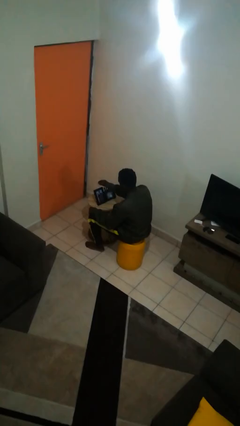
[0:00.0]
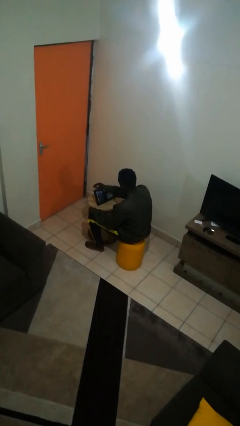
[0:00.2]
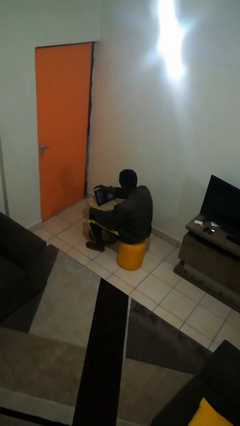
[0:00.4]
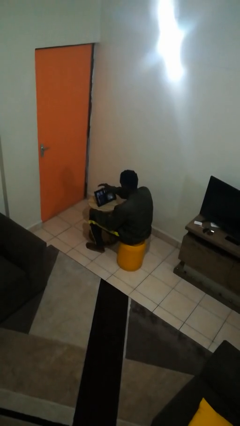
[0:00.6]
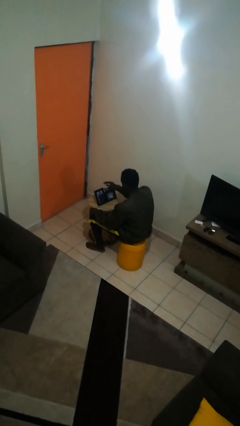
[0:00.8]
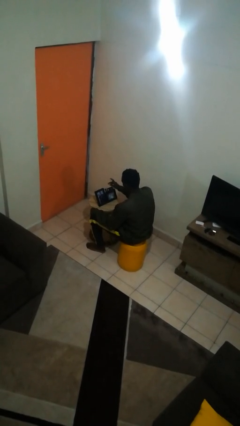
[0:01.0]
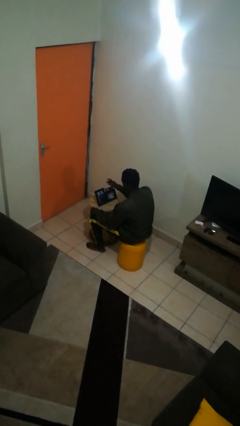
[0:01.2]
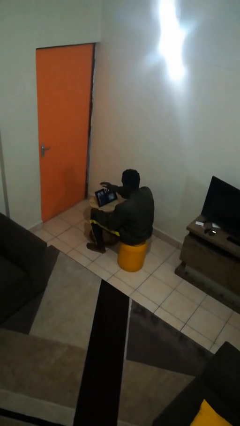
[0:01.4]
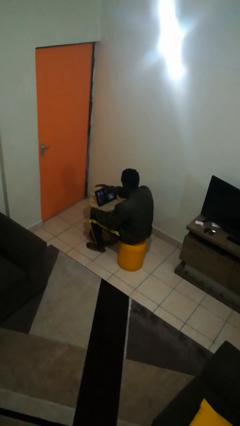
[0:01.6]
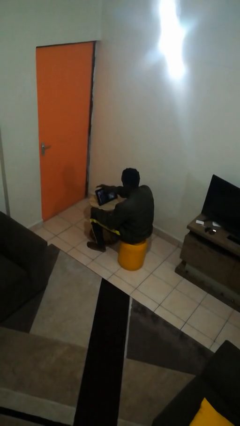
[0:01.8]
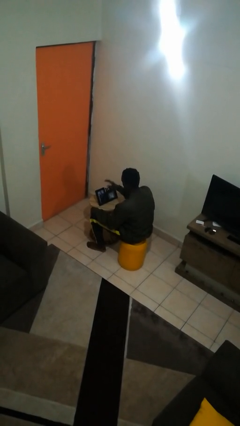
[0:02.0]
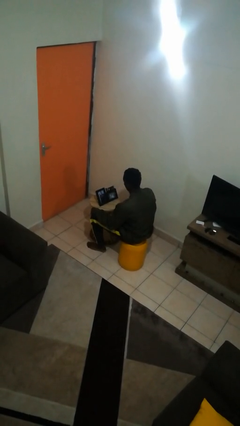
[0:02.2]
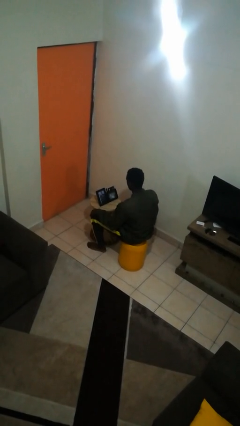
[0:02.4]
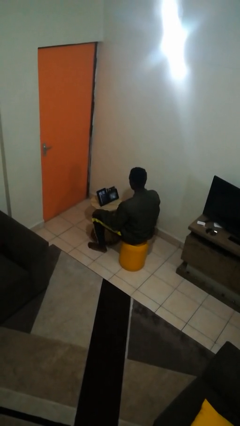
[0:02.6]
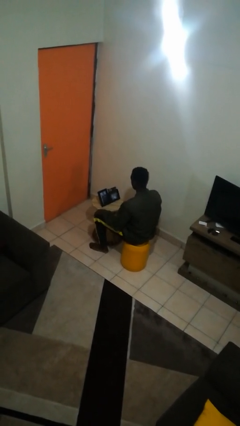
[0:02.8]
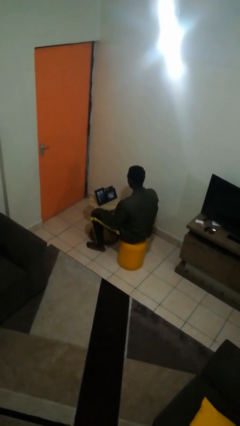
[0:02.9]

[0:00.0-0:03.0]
person waves hand over object

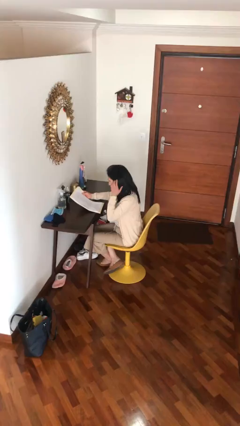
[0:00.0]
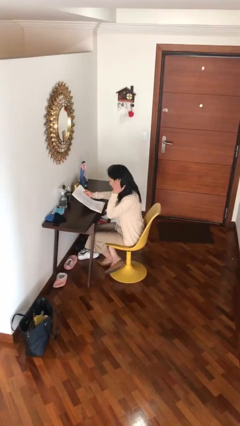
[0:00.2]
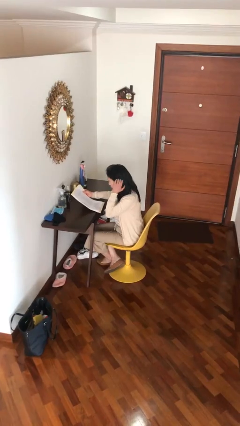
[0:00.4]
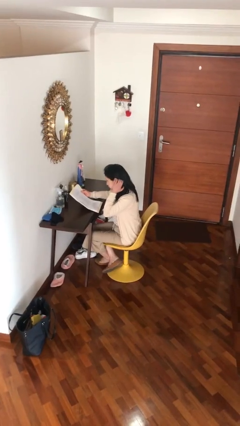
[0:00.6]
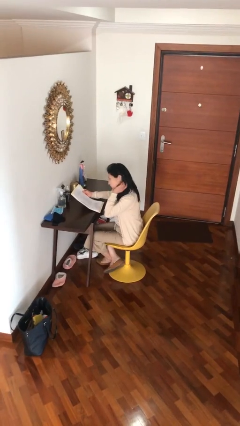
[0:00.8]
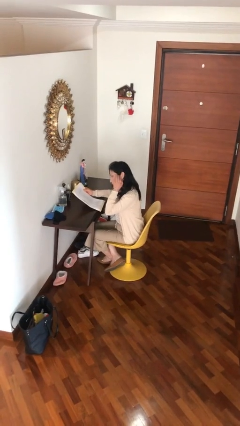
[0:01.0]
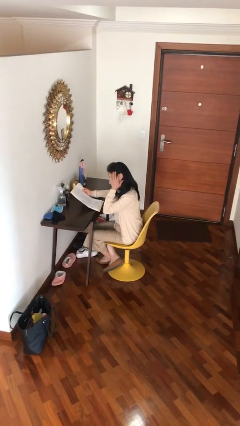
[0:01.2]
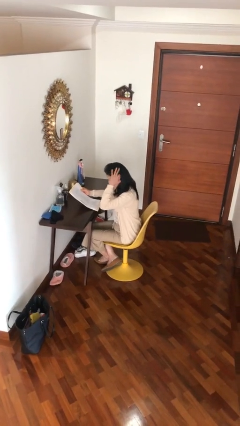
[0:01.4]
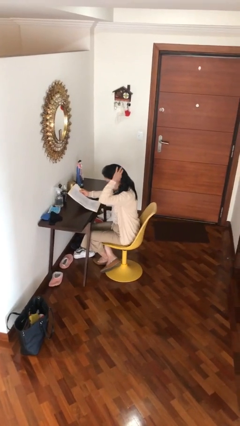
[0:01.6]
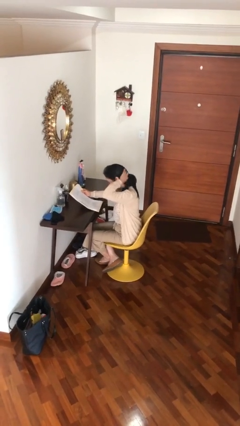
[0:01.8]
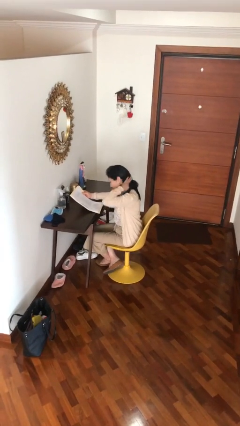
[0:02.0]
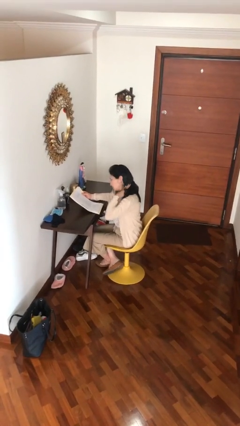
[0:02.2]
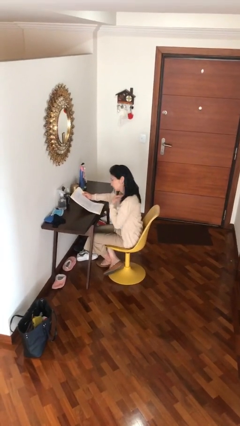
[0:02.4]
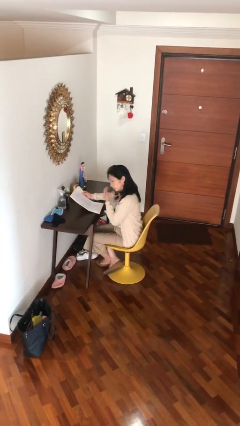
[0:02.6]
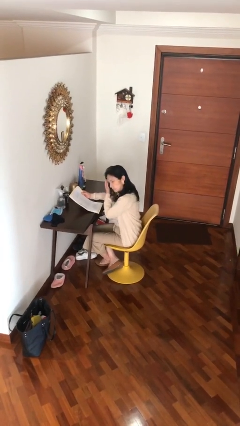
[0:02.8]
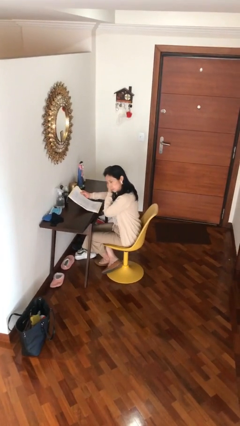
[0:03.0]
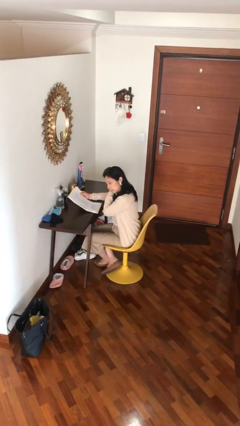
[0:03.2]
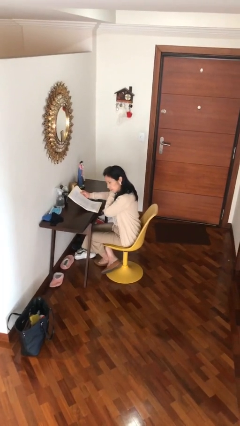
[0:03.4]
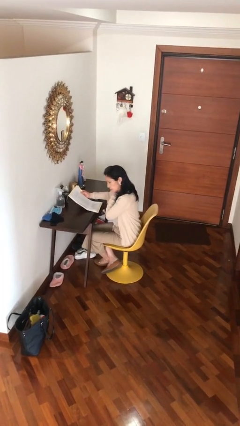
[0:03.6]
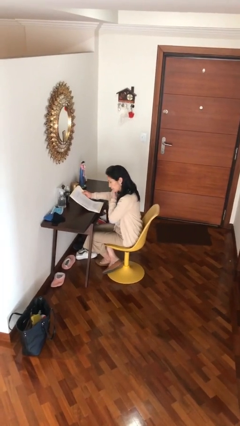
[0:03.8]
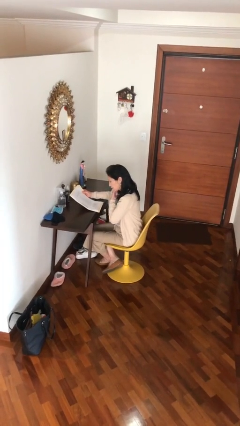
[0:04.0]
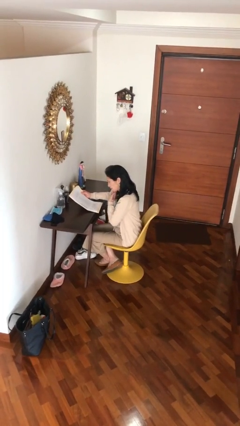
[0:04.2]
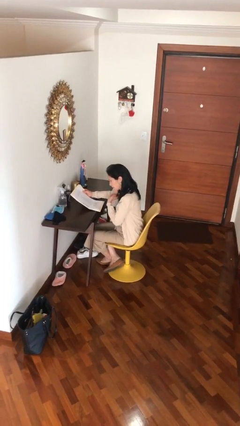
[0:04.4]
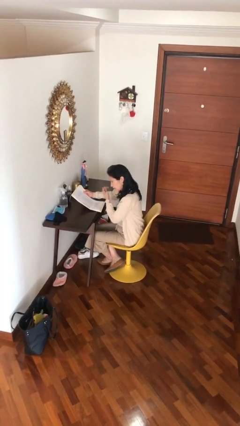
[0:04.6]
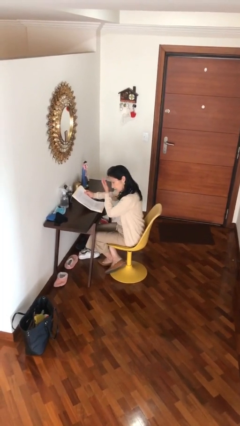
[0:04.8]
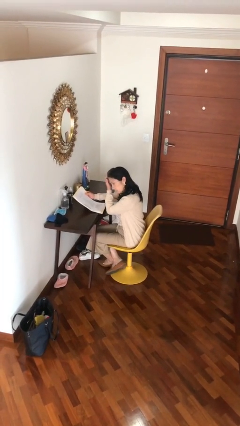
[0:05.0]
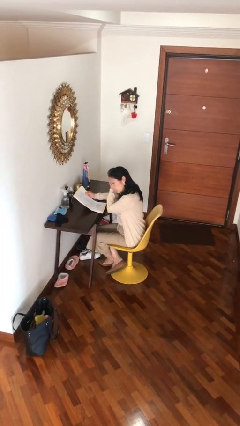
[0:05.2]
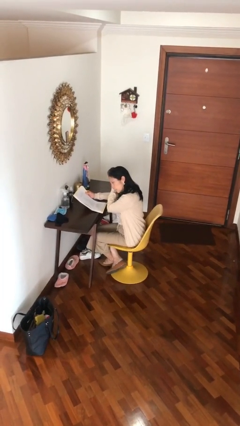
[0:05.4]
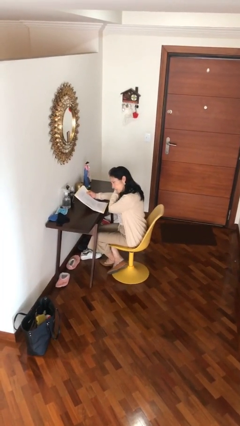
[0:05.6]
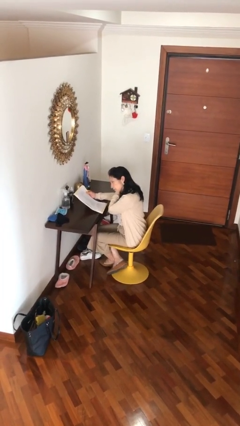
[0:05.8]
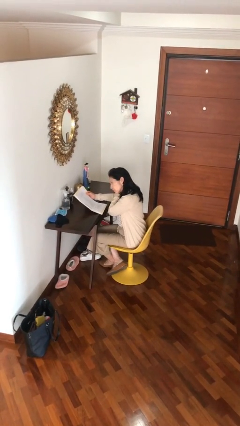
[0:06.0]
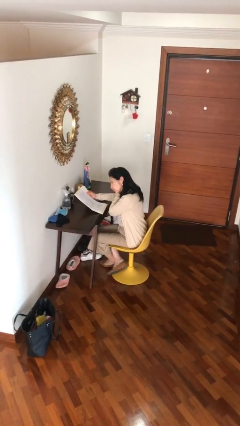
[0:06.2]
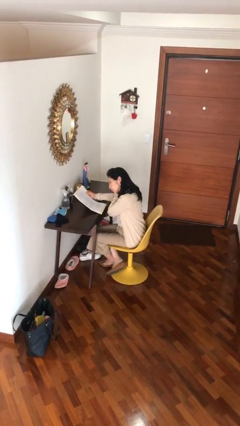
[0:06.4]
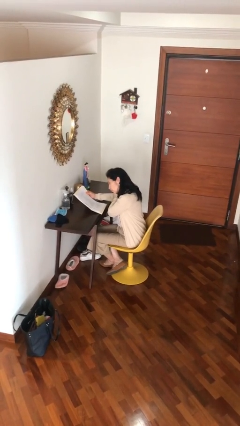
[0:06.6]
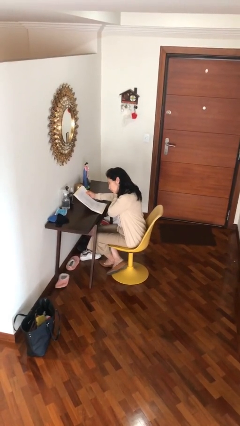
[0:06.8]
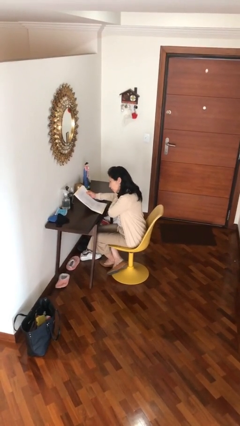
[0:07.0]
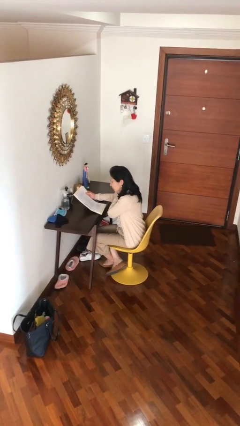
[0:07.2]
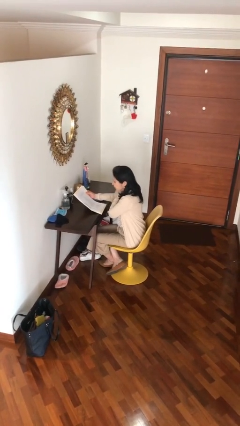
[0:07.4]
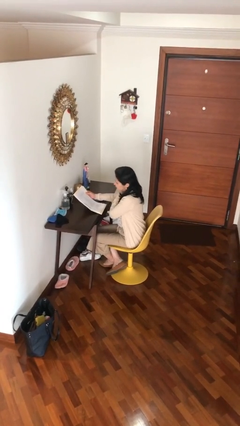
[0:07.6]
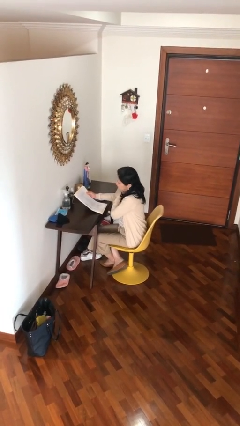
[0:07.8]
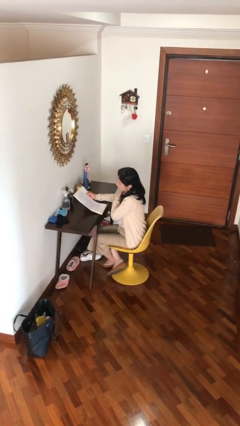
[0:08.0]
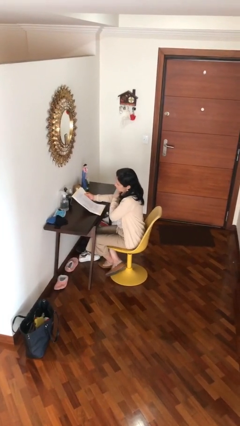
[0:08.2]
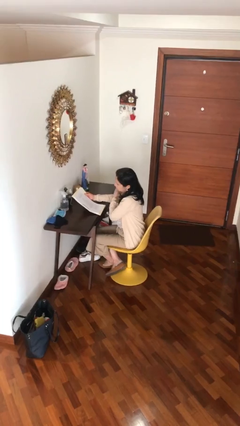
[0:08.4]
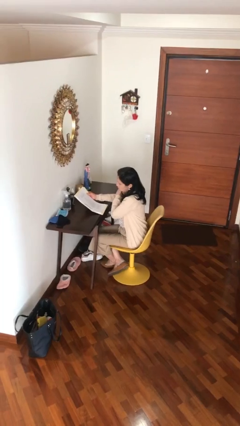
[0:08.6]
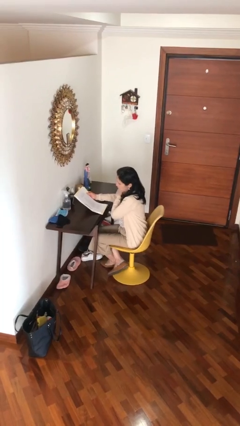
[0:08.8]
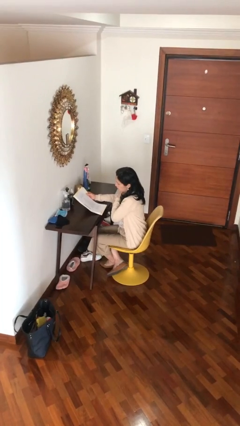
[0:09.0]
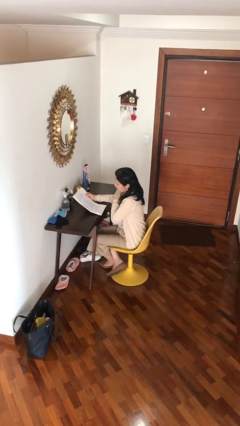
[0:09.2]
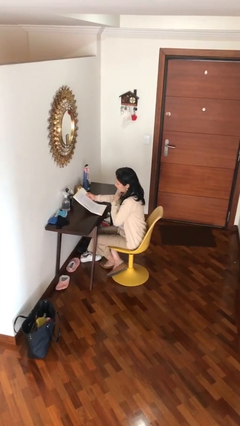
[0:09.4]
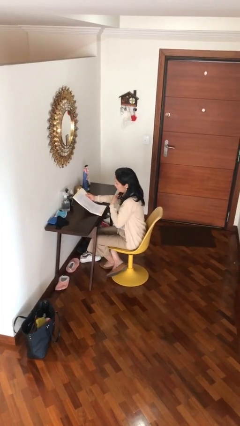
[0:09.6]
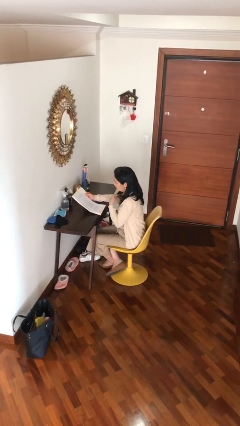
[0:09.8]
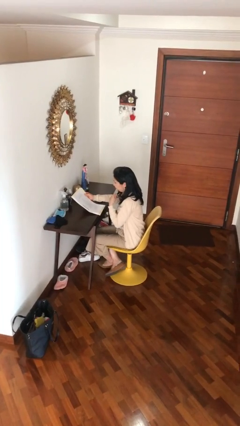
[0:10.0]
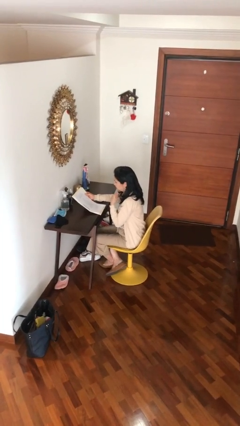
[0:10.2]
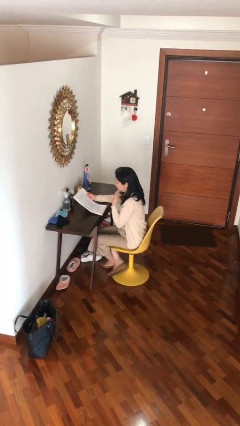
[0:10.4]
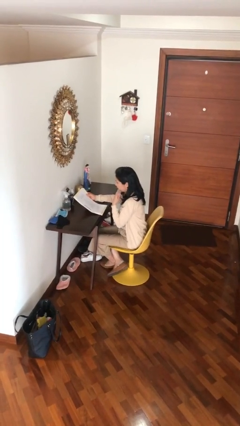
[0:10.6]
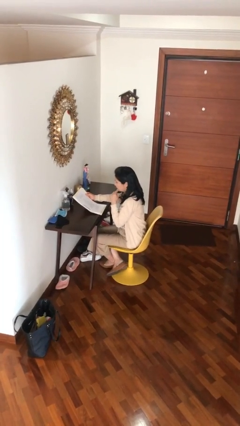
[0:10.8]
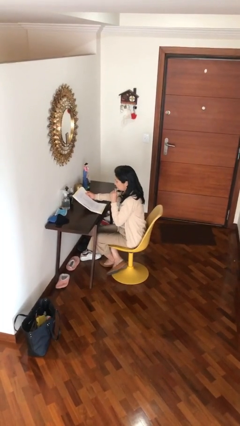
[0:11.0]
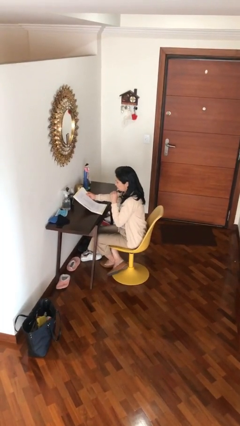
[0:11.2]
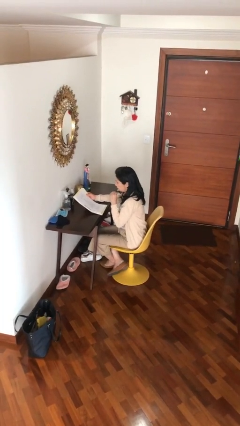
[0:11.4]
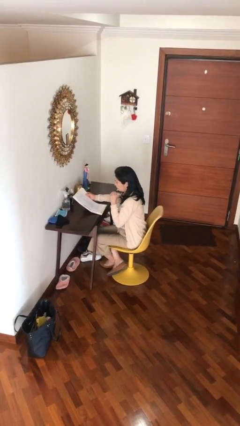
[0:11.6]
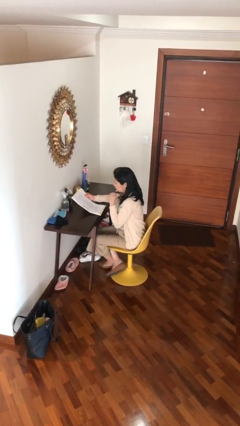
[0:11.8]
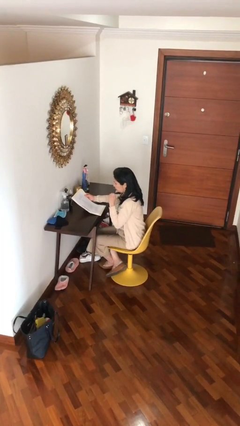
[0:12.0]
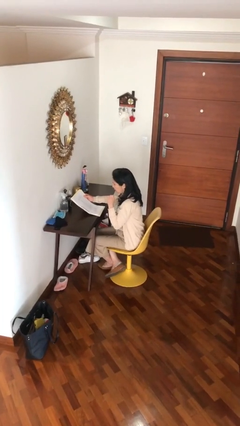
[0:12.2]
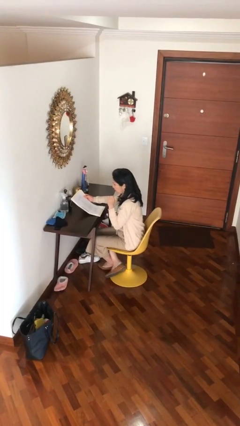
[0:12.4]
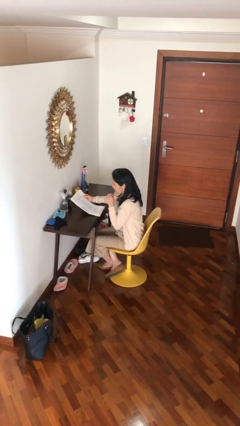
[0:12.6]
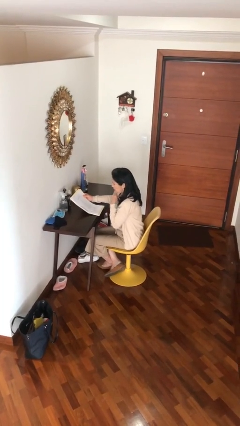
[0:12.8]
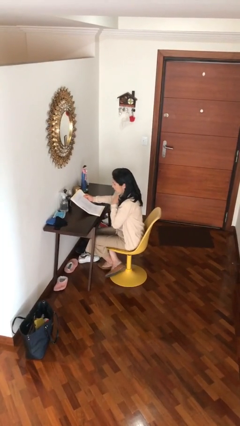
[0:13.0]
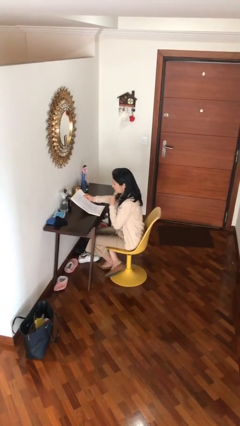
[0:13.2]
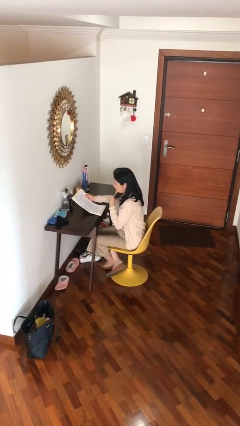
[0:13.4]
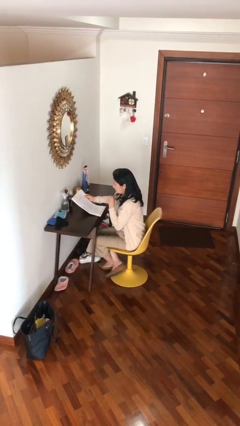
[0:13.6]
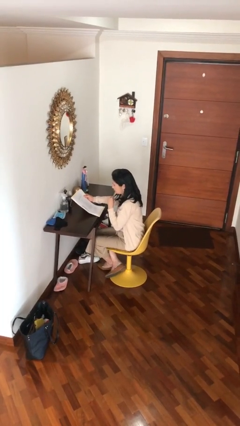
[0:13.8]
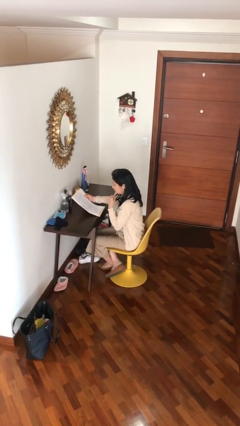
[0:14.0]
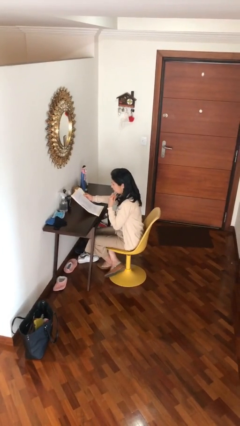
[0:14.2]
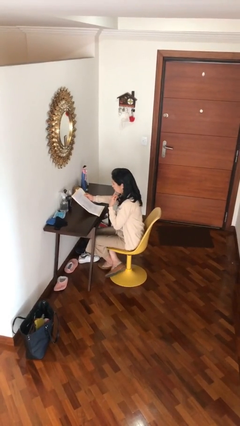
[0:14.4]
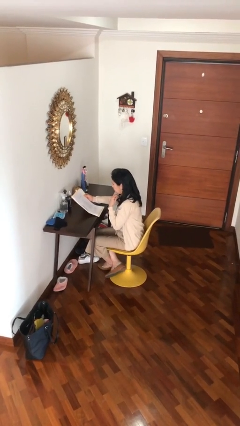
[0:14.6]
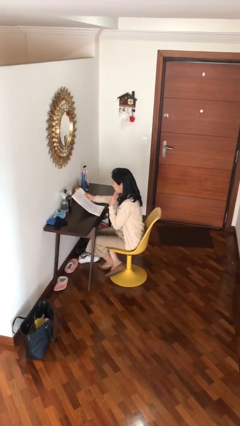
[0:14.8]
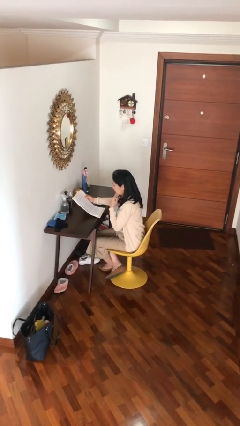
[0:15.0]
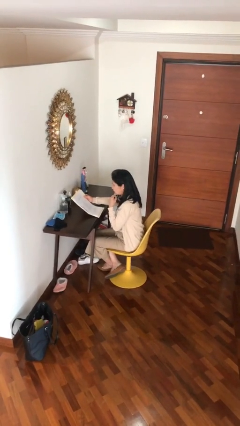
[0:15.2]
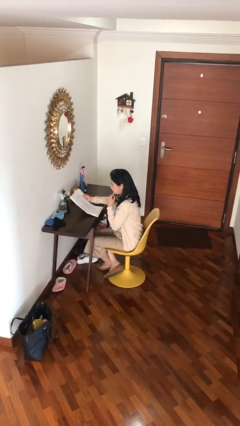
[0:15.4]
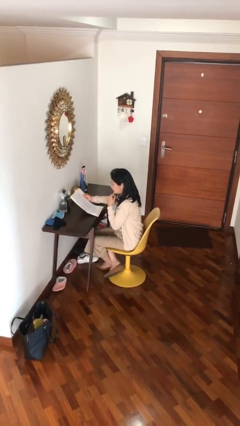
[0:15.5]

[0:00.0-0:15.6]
person reads document
